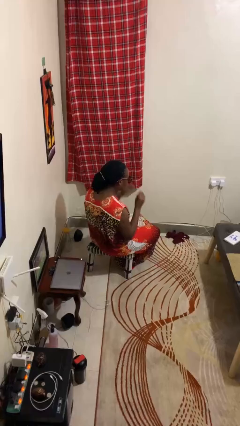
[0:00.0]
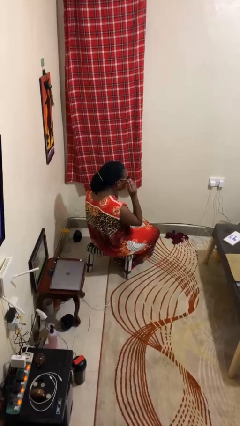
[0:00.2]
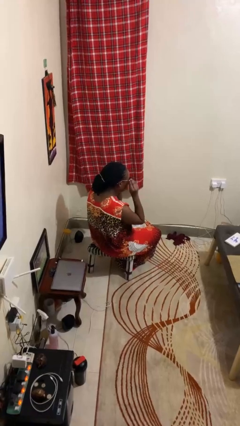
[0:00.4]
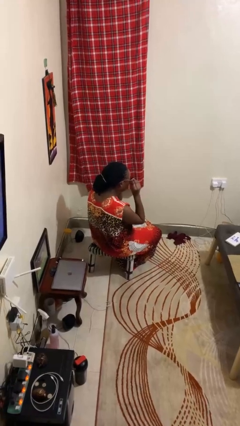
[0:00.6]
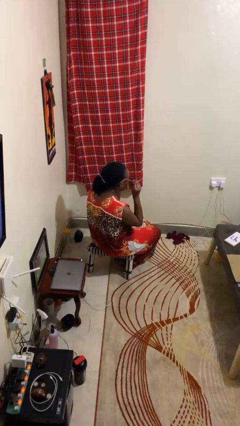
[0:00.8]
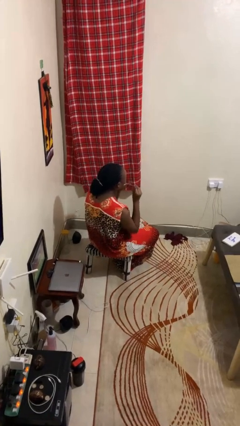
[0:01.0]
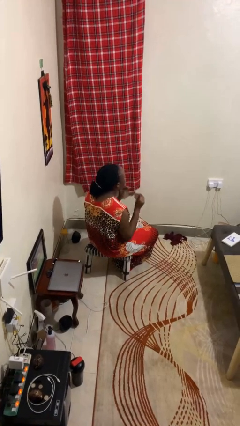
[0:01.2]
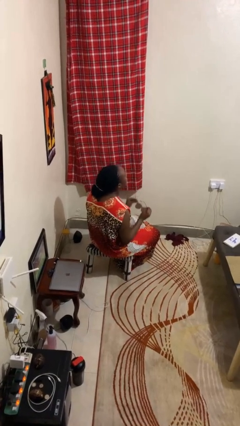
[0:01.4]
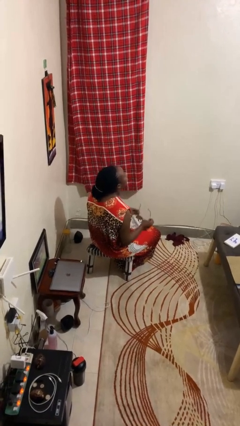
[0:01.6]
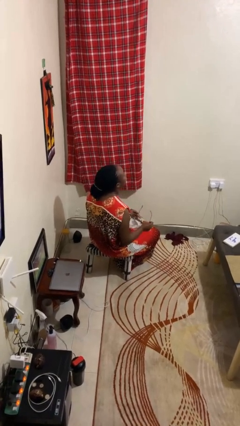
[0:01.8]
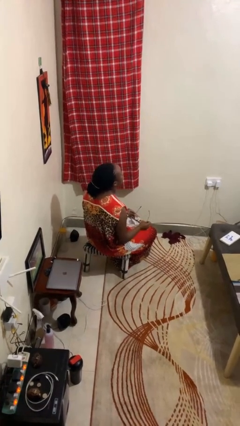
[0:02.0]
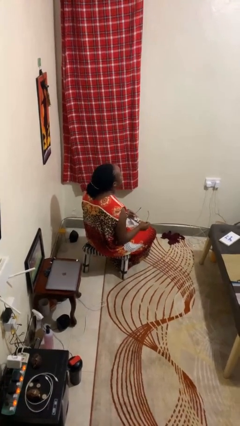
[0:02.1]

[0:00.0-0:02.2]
person takes off sunglasses

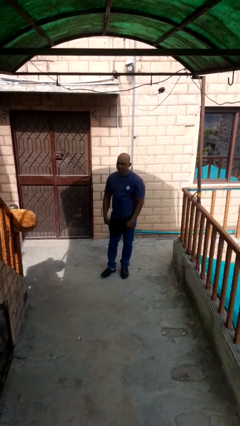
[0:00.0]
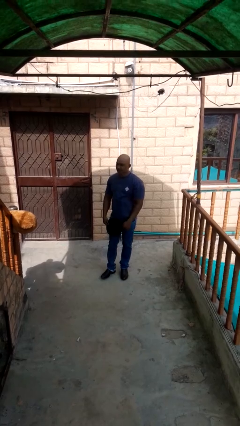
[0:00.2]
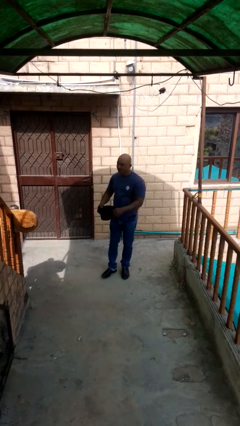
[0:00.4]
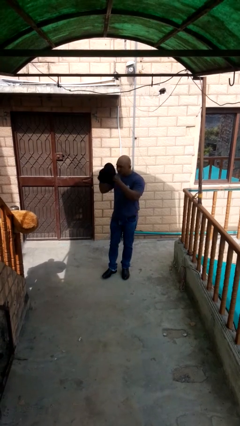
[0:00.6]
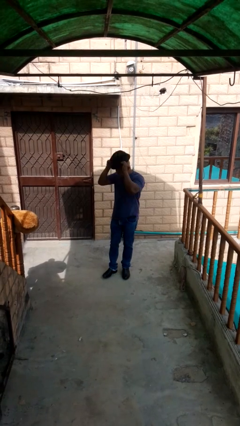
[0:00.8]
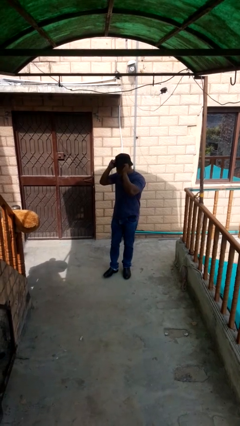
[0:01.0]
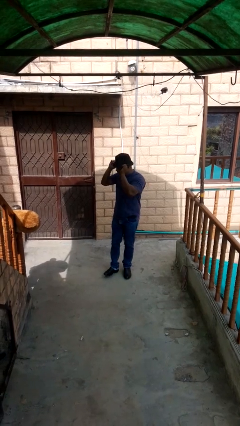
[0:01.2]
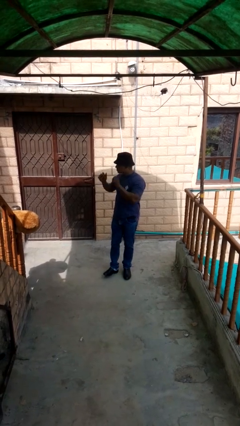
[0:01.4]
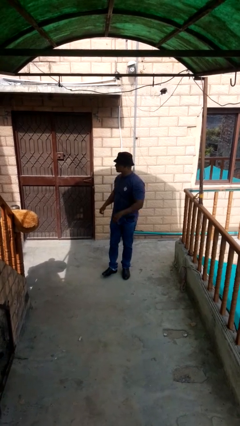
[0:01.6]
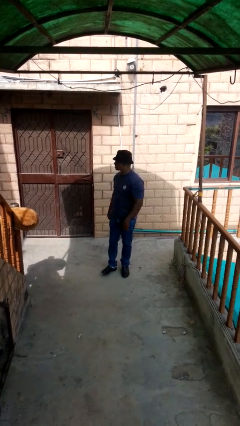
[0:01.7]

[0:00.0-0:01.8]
person puts on hat

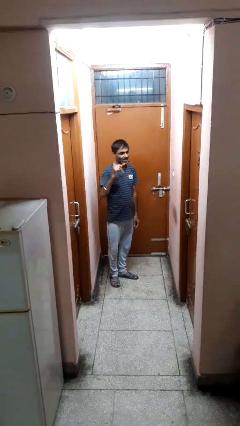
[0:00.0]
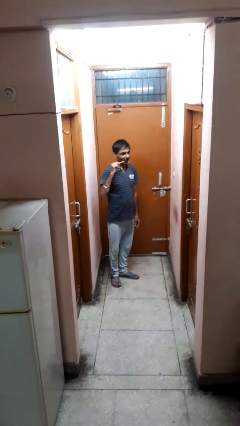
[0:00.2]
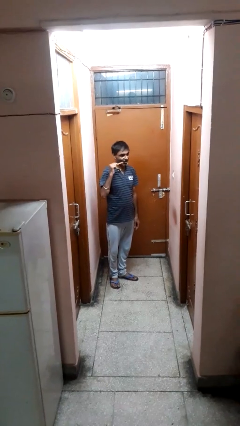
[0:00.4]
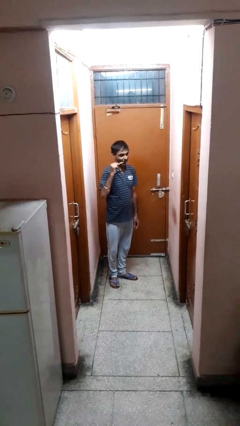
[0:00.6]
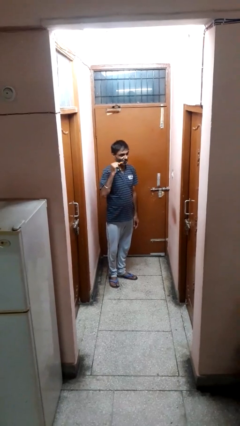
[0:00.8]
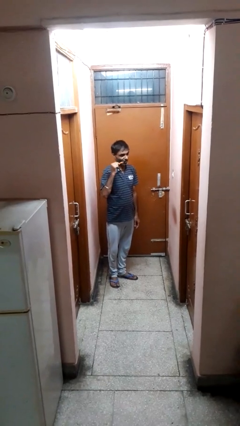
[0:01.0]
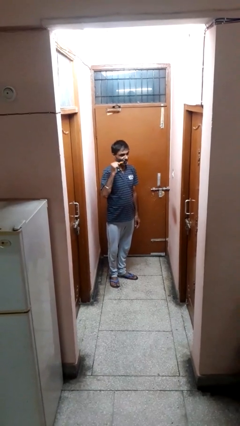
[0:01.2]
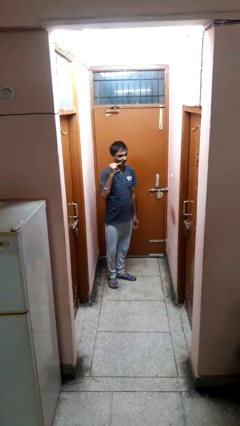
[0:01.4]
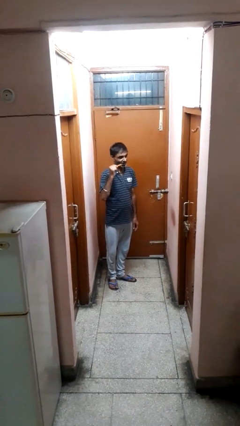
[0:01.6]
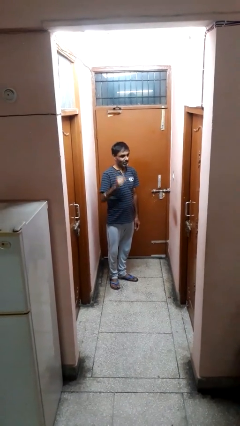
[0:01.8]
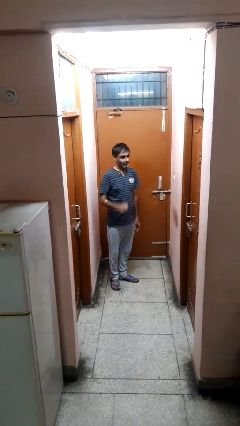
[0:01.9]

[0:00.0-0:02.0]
person brushes teeth

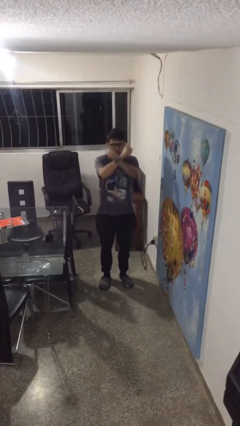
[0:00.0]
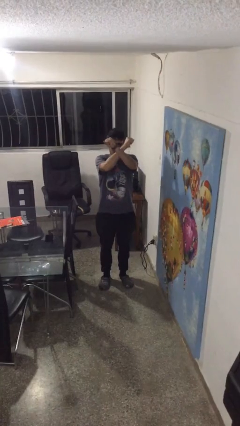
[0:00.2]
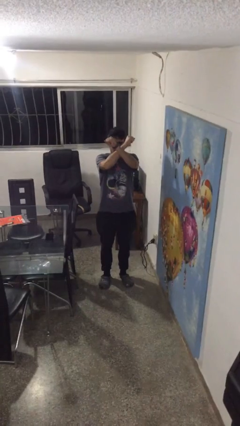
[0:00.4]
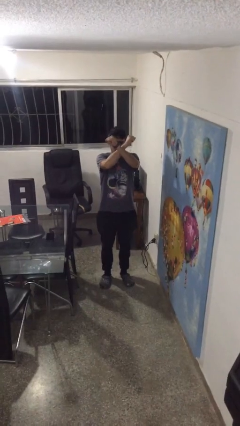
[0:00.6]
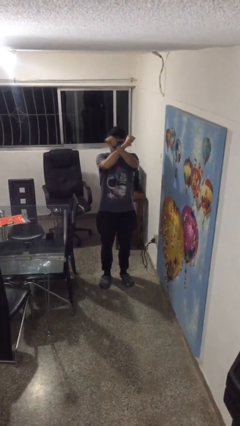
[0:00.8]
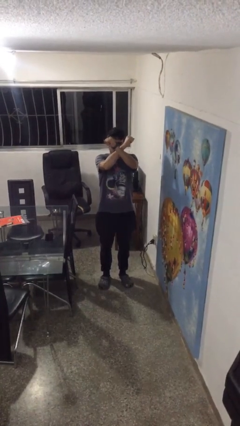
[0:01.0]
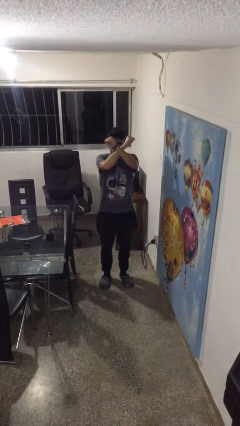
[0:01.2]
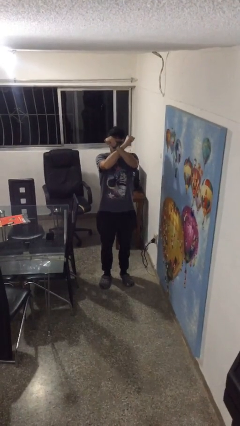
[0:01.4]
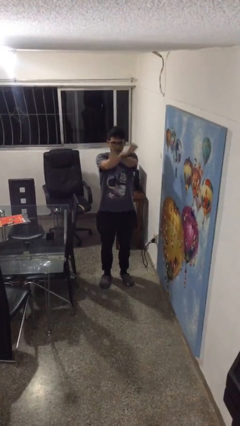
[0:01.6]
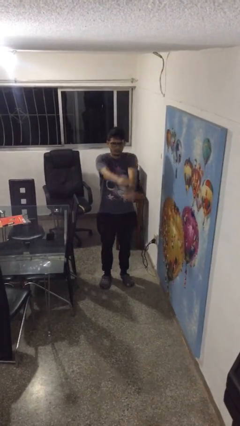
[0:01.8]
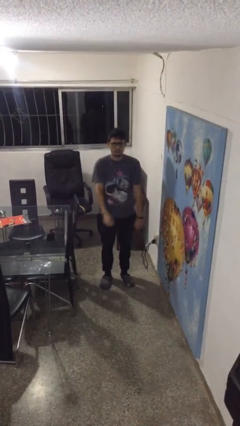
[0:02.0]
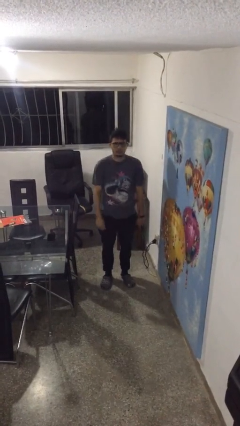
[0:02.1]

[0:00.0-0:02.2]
person gestures arms x

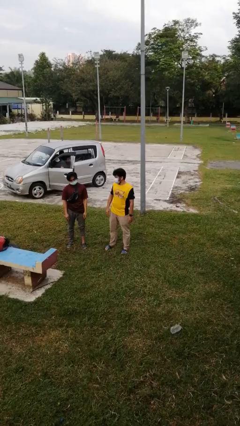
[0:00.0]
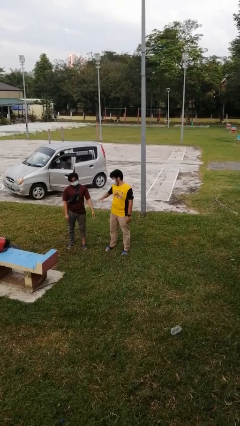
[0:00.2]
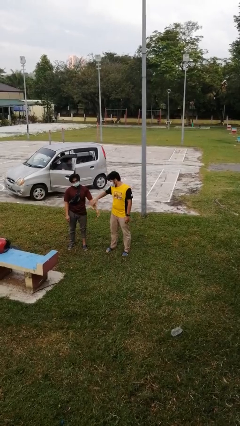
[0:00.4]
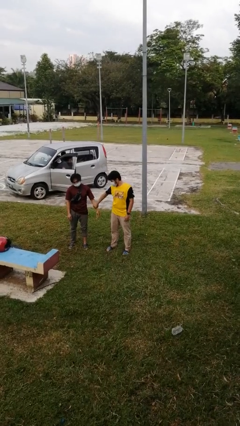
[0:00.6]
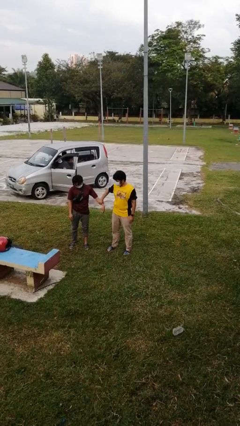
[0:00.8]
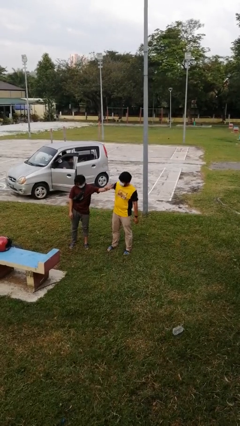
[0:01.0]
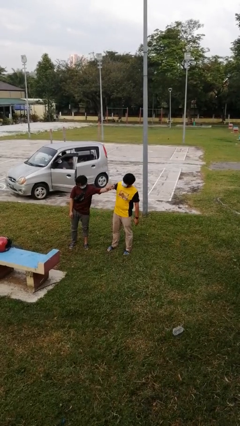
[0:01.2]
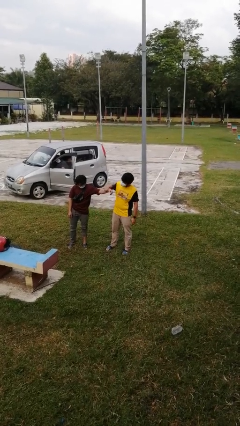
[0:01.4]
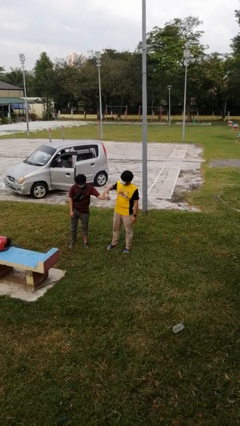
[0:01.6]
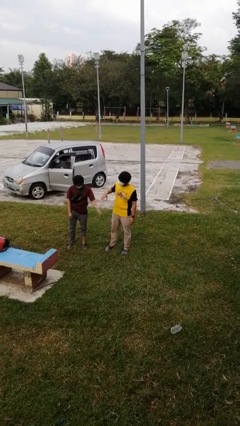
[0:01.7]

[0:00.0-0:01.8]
person grabs person by forearm

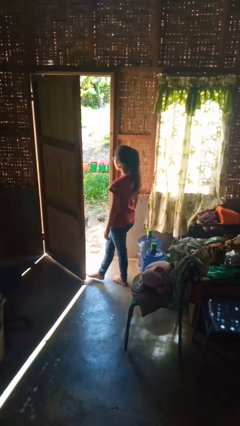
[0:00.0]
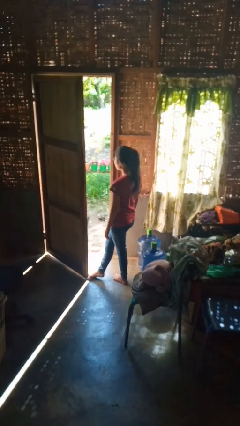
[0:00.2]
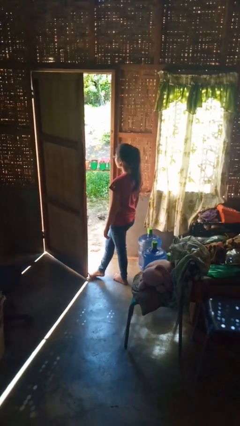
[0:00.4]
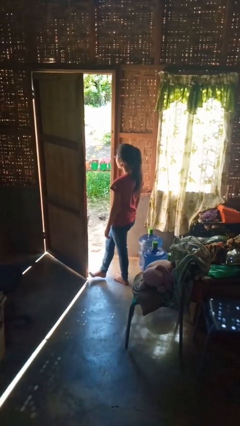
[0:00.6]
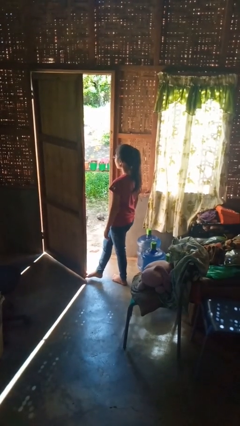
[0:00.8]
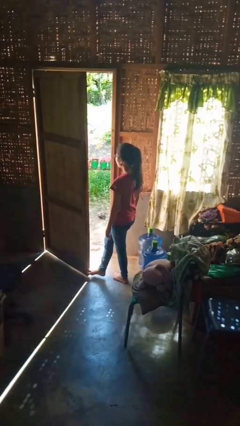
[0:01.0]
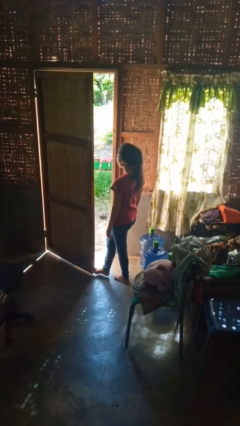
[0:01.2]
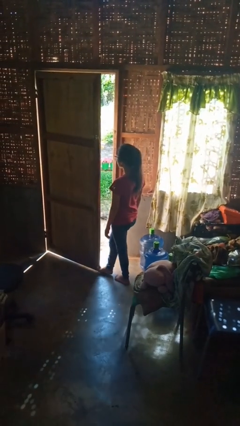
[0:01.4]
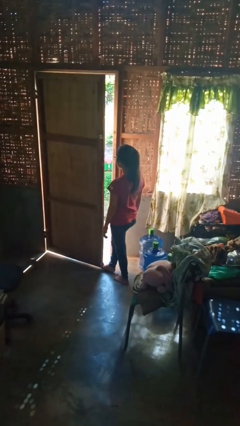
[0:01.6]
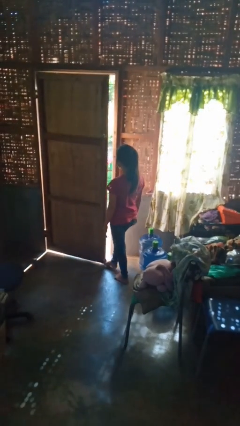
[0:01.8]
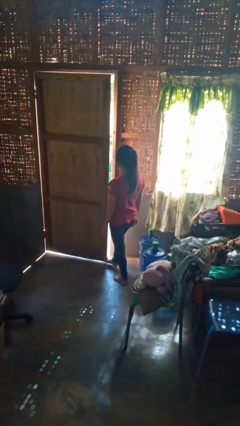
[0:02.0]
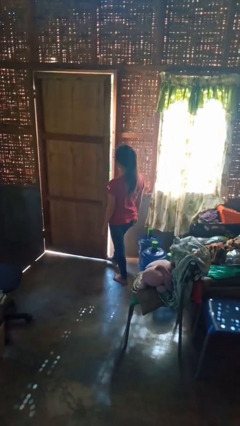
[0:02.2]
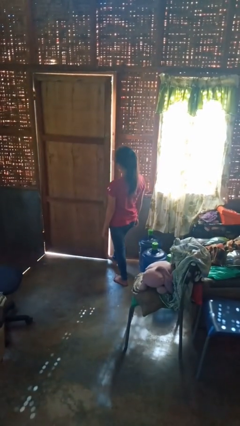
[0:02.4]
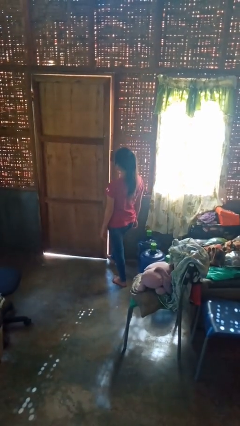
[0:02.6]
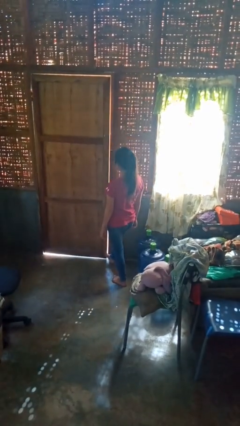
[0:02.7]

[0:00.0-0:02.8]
person closes door with foot

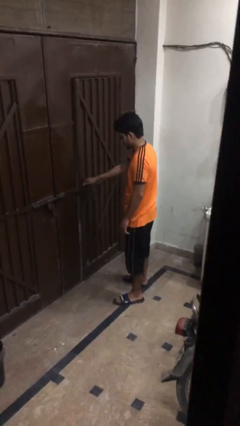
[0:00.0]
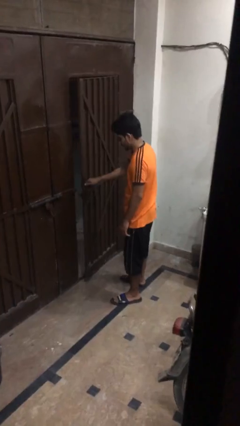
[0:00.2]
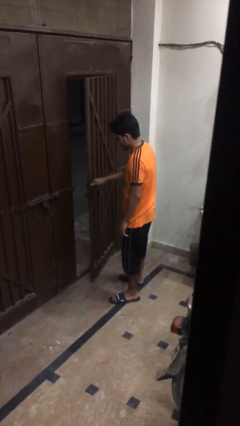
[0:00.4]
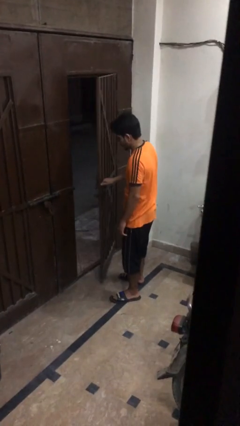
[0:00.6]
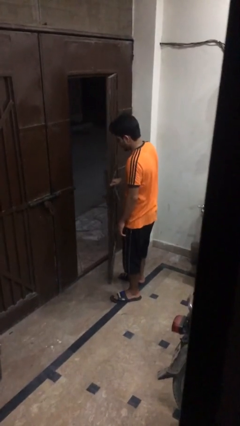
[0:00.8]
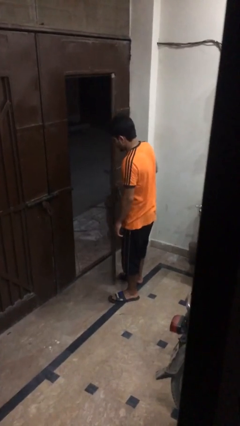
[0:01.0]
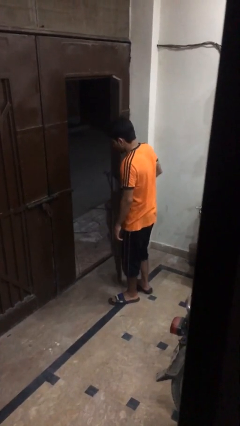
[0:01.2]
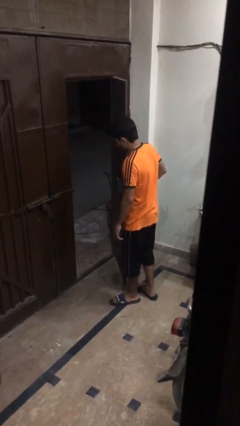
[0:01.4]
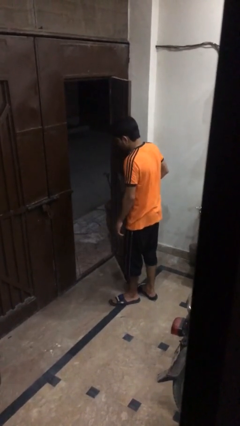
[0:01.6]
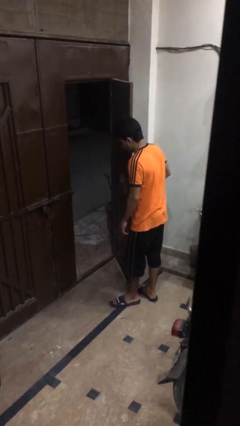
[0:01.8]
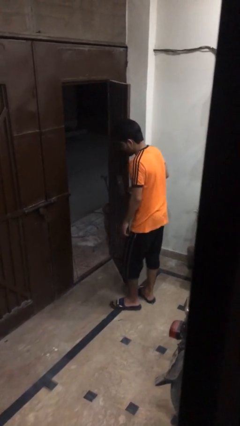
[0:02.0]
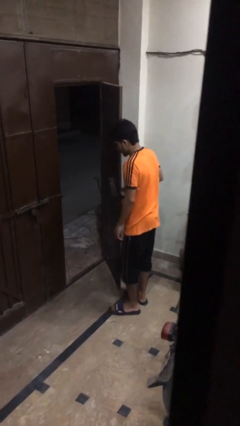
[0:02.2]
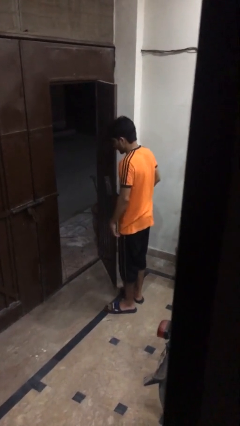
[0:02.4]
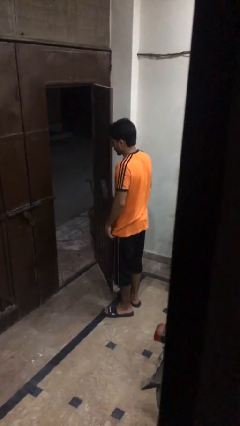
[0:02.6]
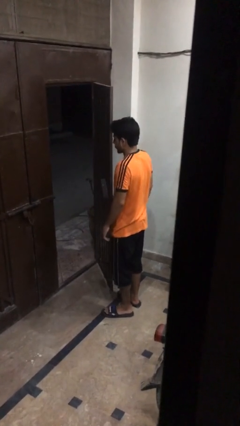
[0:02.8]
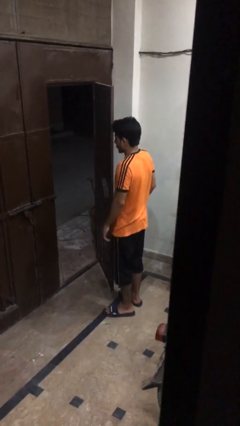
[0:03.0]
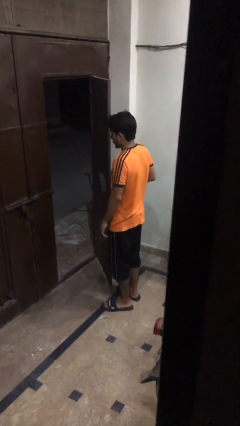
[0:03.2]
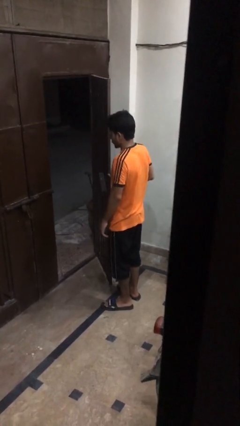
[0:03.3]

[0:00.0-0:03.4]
person opens gate
